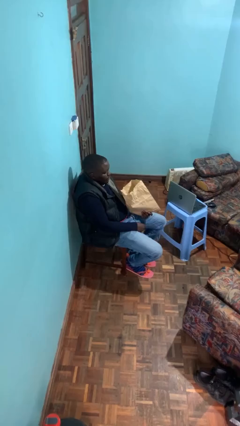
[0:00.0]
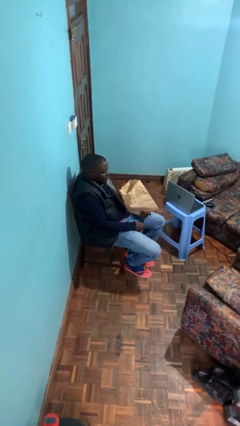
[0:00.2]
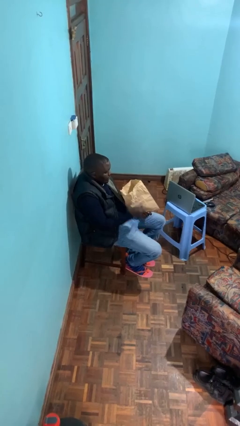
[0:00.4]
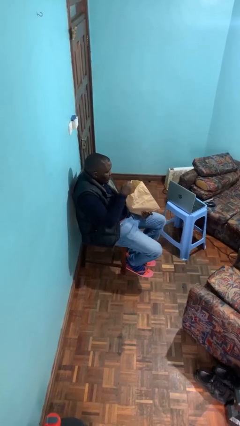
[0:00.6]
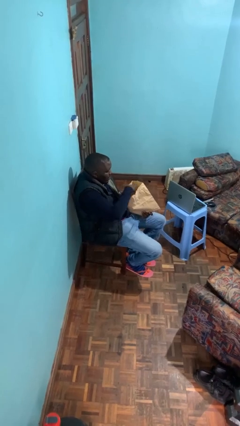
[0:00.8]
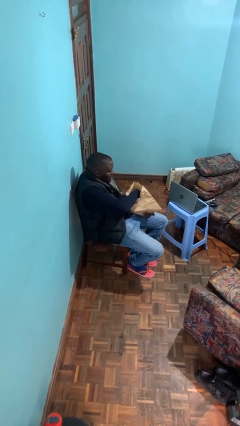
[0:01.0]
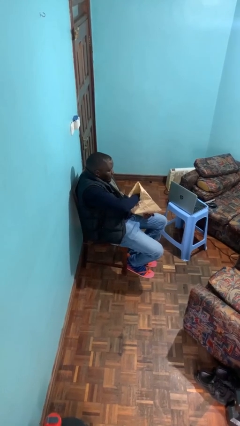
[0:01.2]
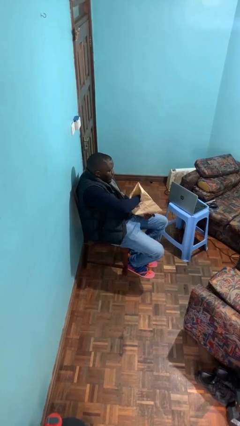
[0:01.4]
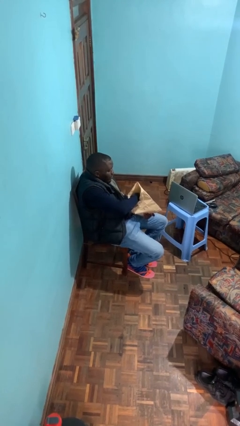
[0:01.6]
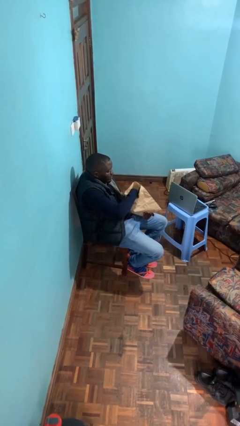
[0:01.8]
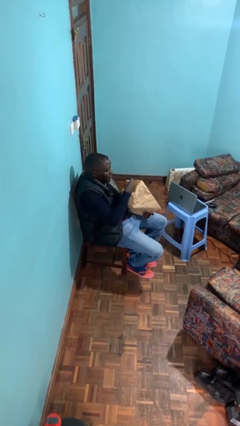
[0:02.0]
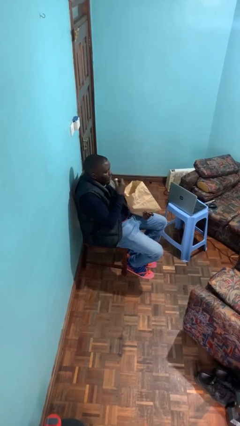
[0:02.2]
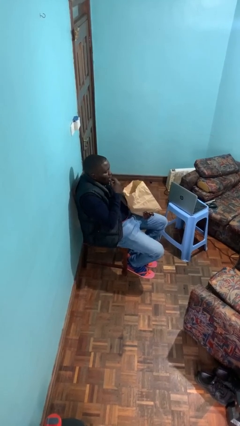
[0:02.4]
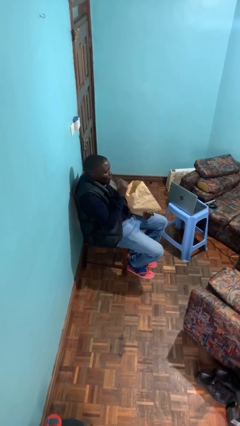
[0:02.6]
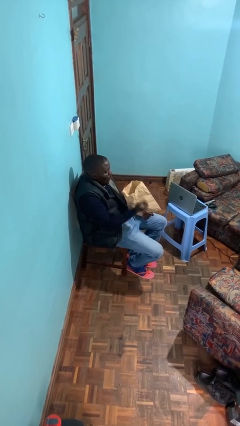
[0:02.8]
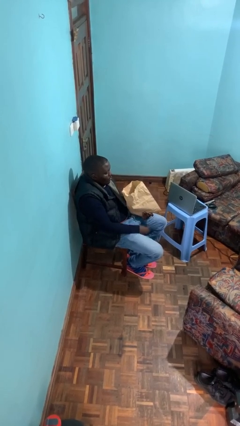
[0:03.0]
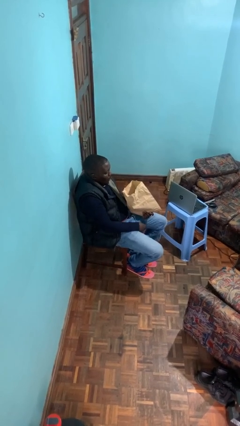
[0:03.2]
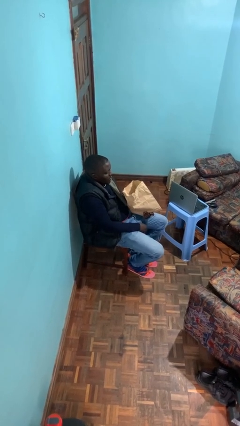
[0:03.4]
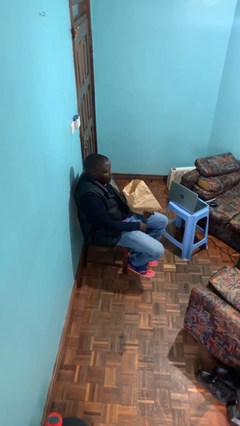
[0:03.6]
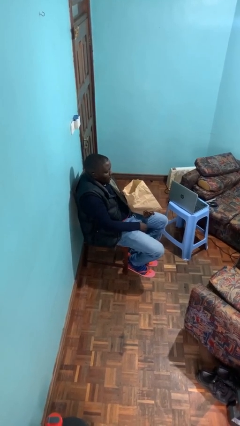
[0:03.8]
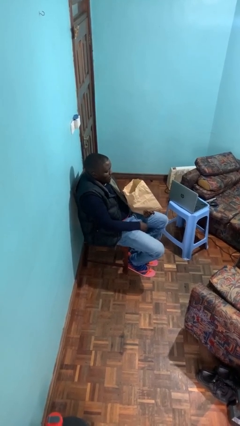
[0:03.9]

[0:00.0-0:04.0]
person eats snack from bag

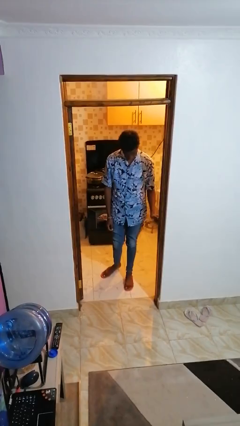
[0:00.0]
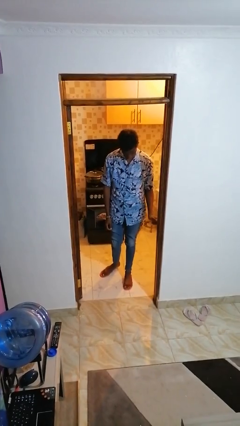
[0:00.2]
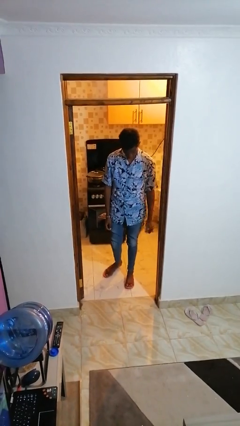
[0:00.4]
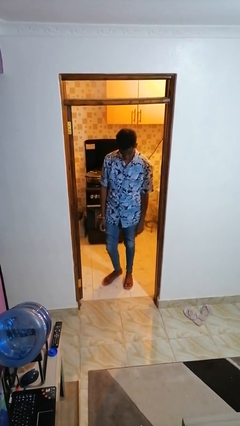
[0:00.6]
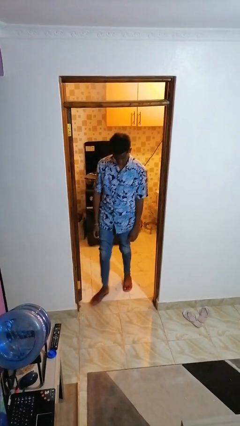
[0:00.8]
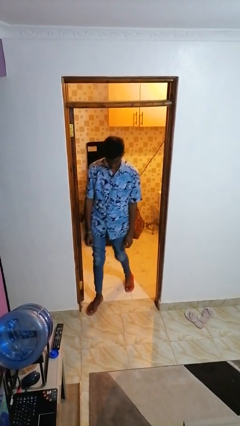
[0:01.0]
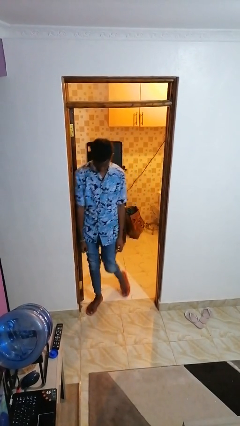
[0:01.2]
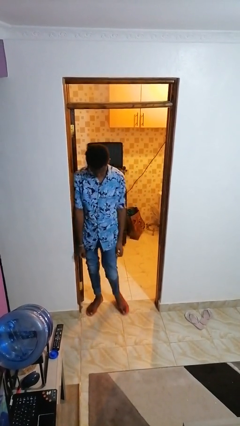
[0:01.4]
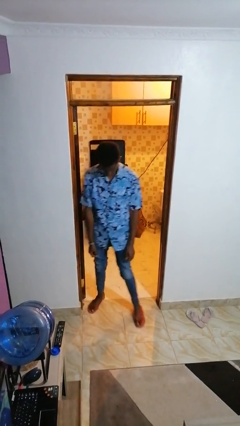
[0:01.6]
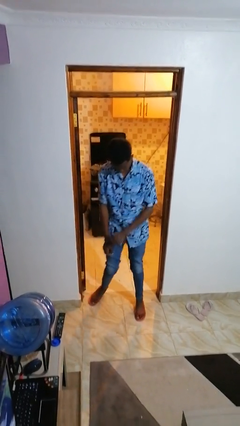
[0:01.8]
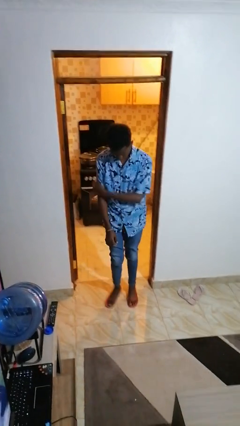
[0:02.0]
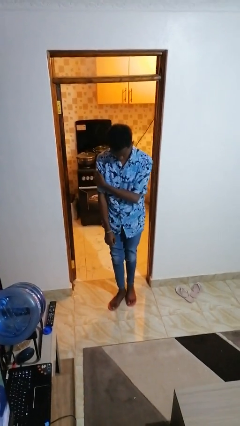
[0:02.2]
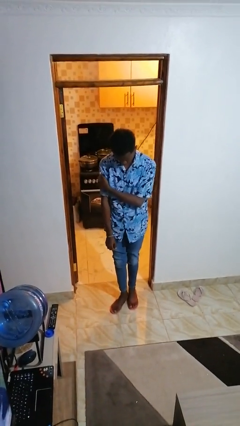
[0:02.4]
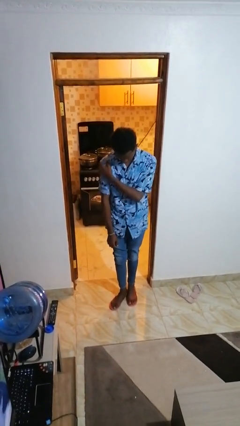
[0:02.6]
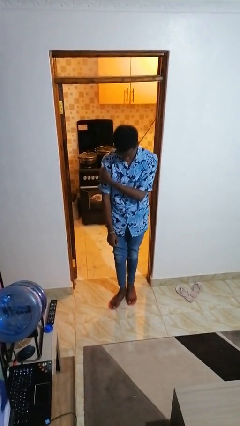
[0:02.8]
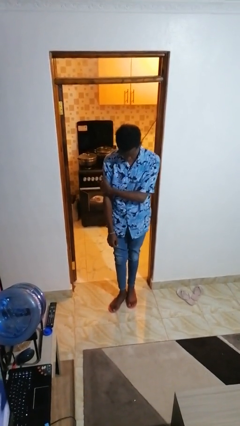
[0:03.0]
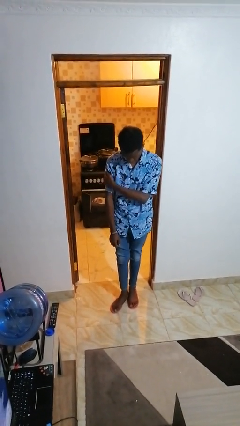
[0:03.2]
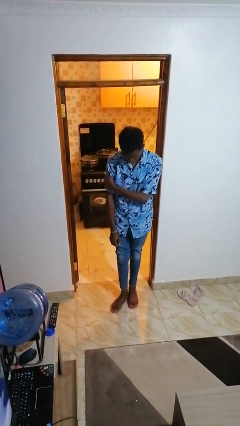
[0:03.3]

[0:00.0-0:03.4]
person bumps into wall

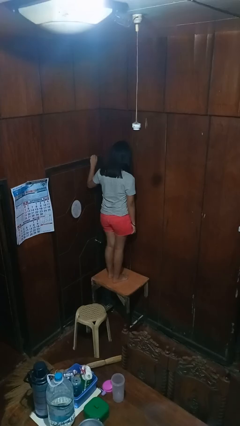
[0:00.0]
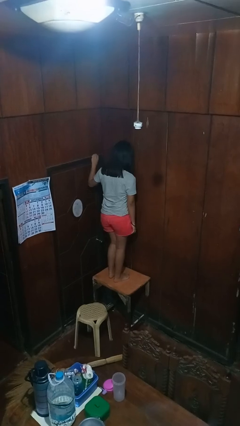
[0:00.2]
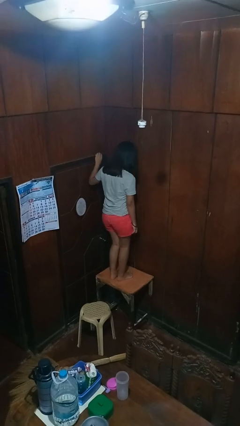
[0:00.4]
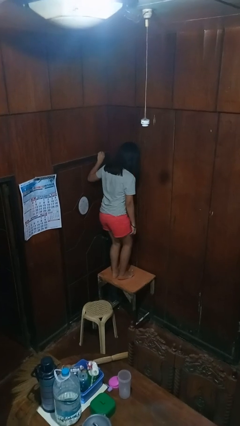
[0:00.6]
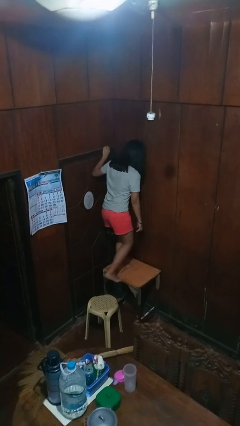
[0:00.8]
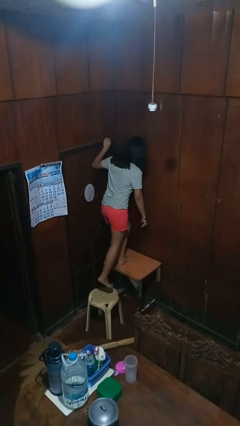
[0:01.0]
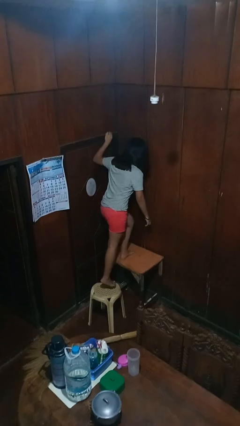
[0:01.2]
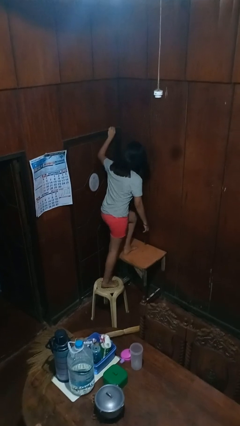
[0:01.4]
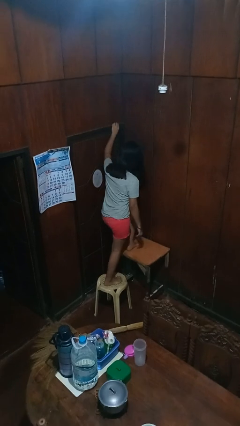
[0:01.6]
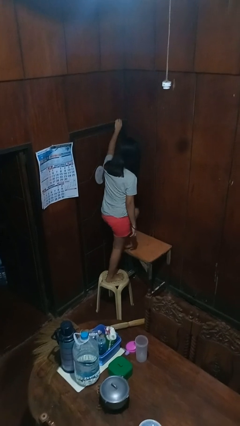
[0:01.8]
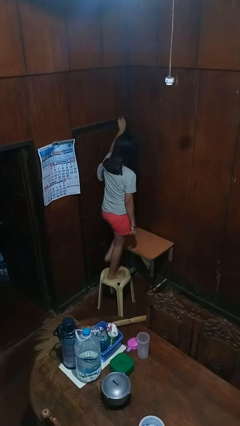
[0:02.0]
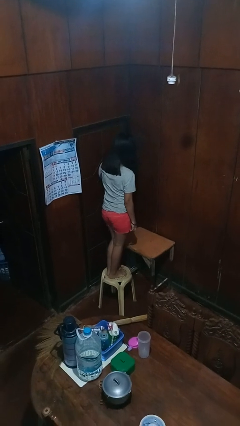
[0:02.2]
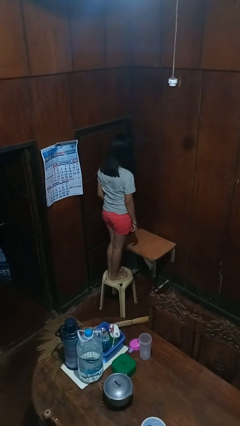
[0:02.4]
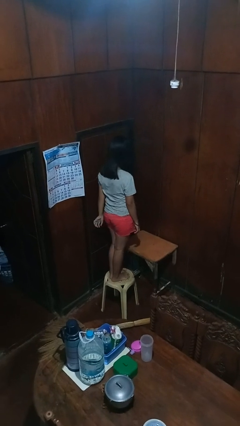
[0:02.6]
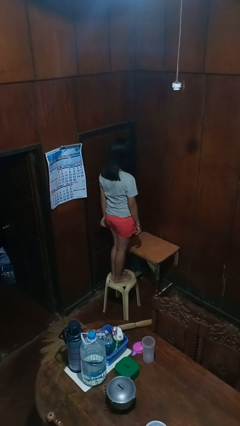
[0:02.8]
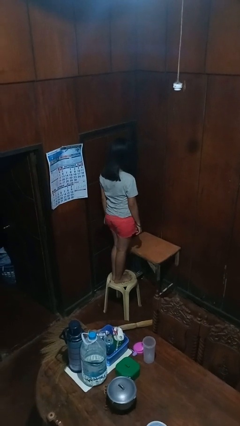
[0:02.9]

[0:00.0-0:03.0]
person climbs off table

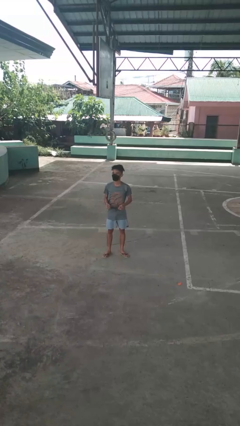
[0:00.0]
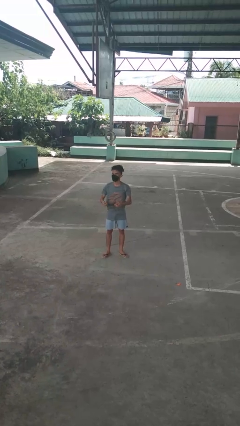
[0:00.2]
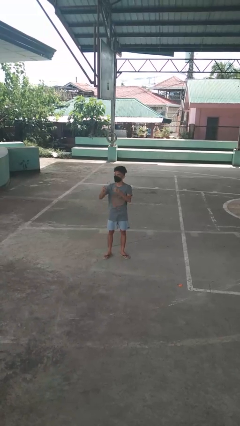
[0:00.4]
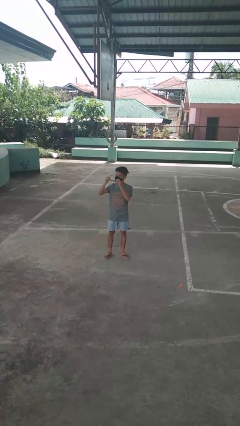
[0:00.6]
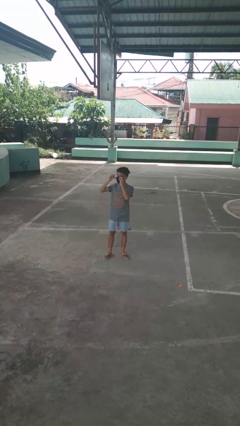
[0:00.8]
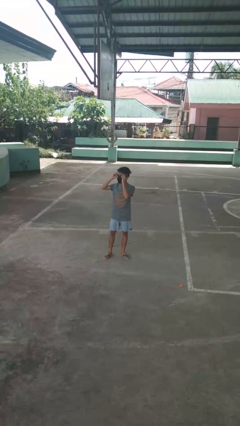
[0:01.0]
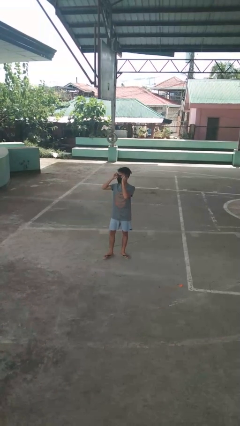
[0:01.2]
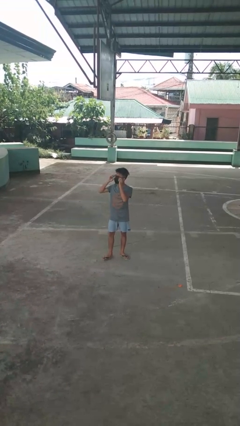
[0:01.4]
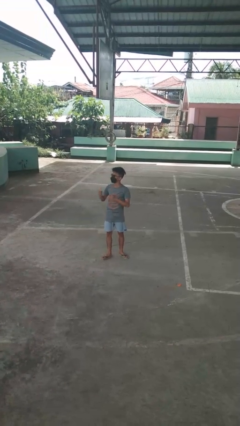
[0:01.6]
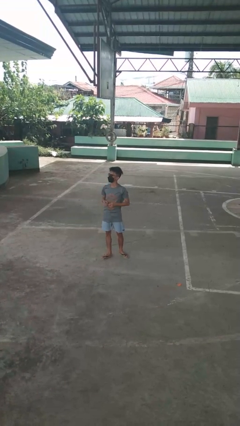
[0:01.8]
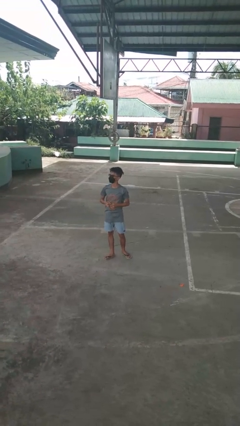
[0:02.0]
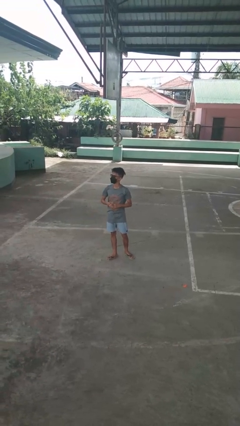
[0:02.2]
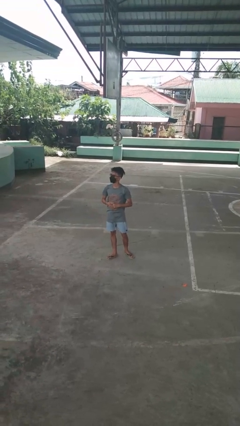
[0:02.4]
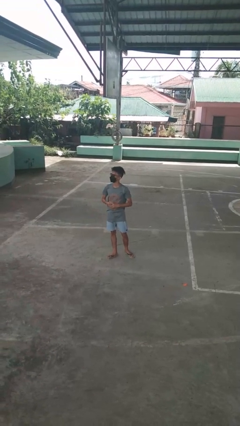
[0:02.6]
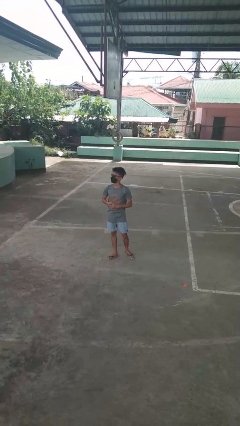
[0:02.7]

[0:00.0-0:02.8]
person puts on glasses

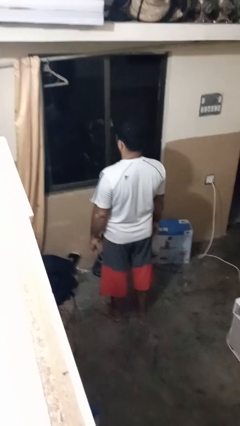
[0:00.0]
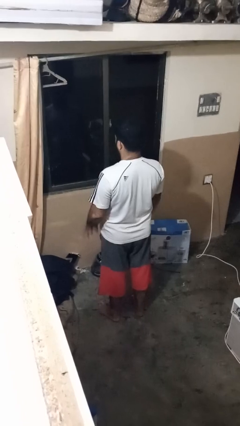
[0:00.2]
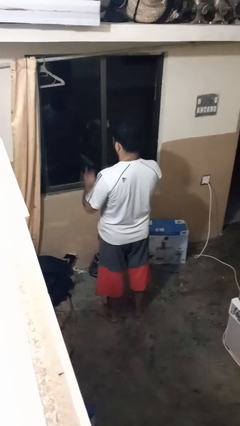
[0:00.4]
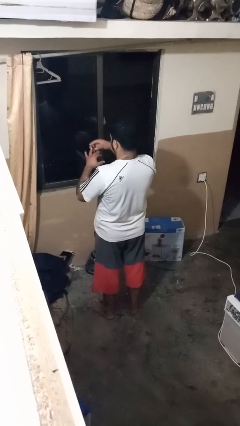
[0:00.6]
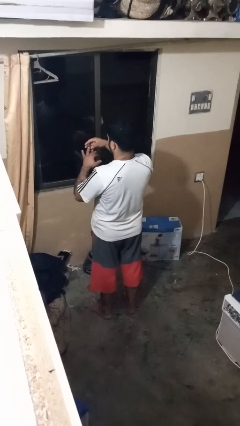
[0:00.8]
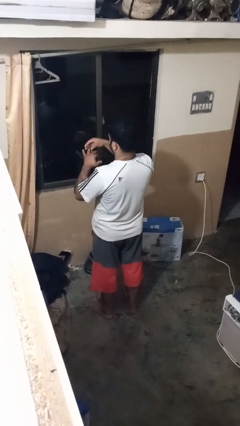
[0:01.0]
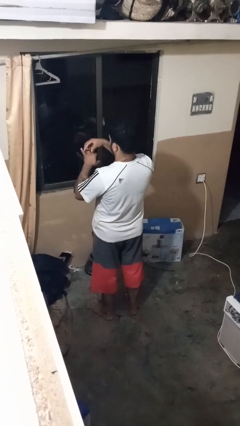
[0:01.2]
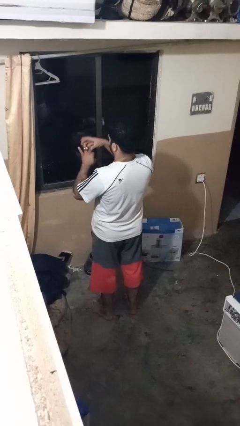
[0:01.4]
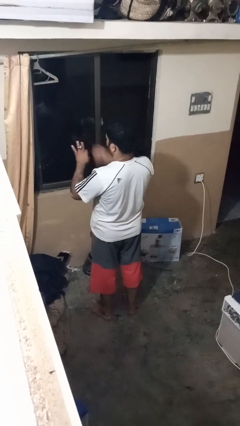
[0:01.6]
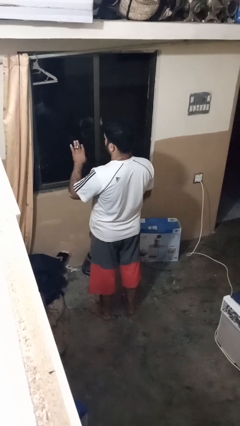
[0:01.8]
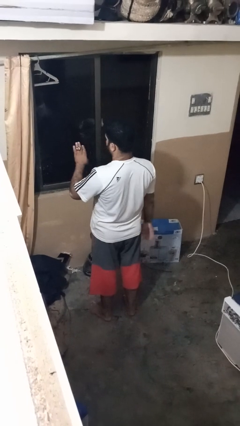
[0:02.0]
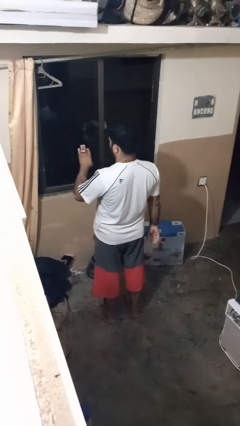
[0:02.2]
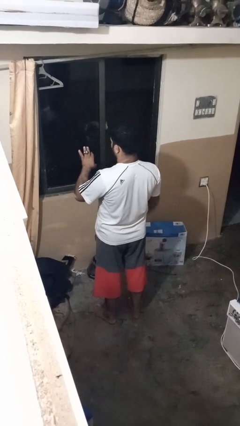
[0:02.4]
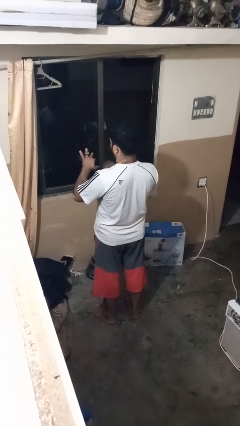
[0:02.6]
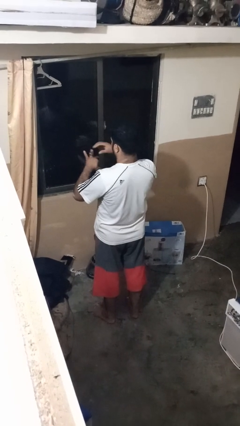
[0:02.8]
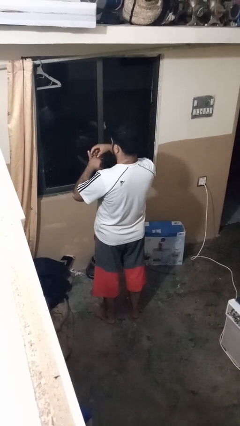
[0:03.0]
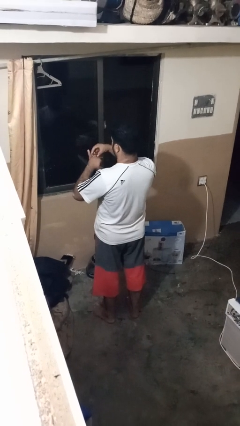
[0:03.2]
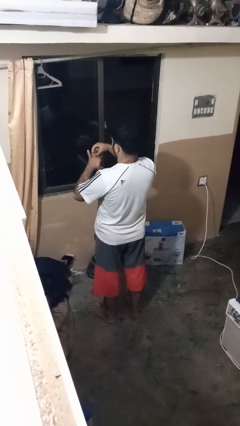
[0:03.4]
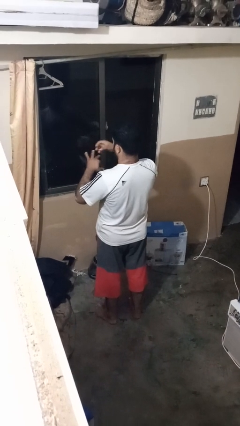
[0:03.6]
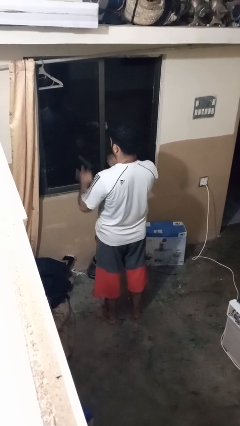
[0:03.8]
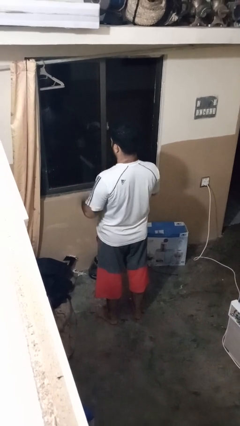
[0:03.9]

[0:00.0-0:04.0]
person puts on ring

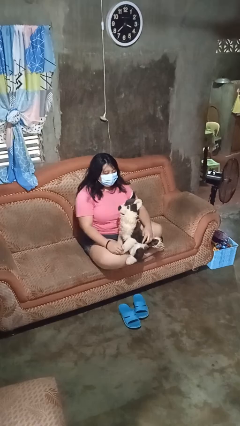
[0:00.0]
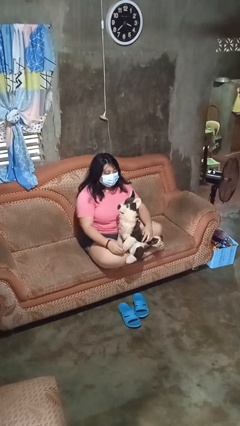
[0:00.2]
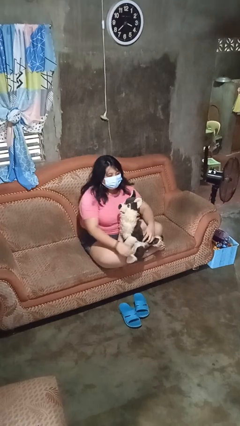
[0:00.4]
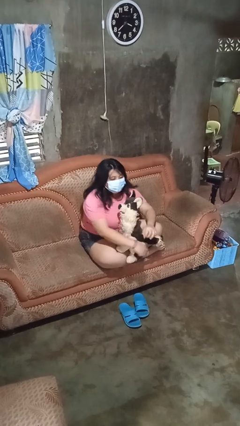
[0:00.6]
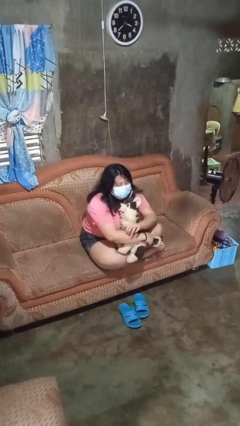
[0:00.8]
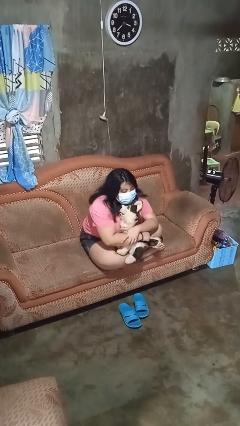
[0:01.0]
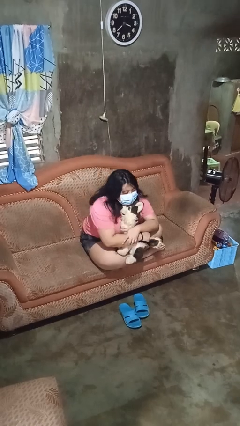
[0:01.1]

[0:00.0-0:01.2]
person hugs stuffed animal
